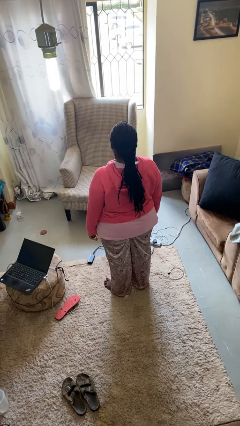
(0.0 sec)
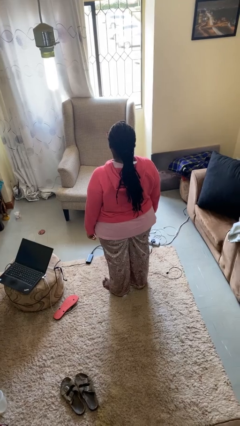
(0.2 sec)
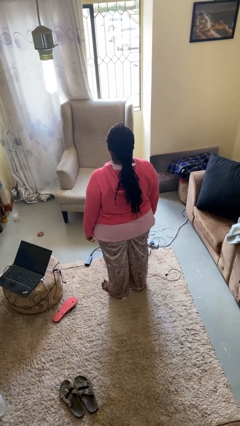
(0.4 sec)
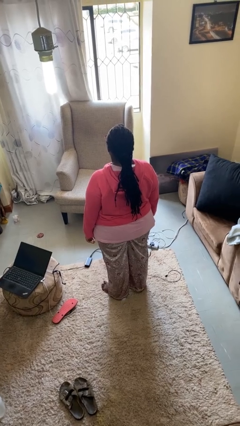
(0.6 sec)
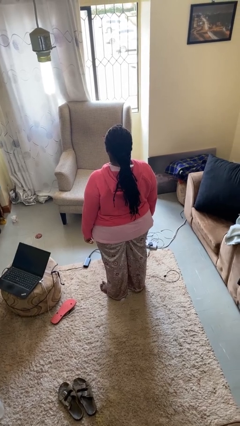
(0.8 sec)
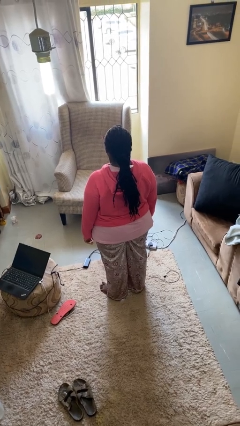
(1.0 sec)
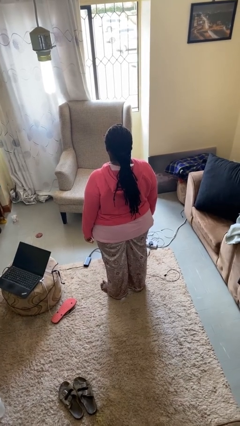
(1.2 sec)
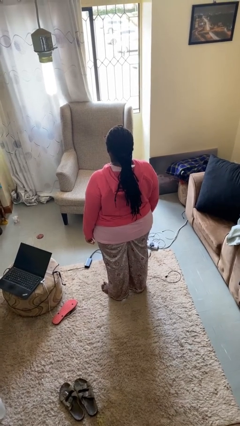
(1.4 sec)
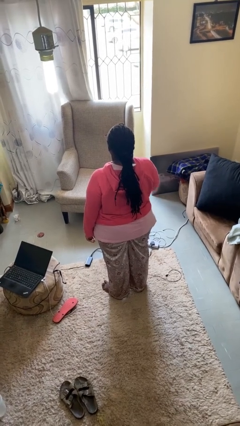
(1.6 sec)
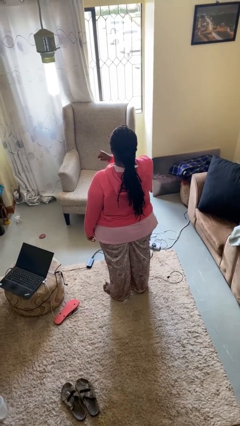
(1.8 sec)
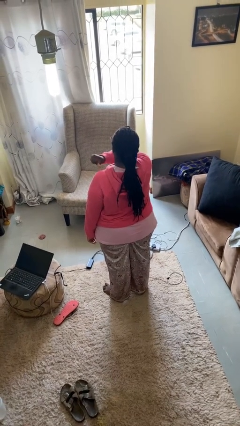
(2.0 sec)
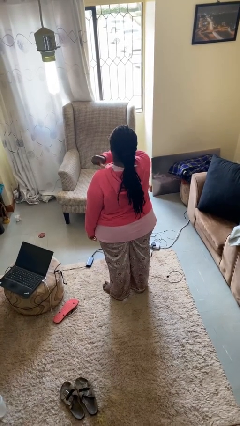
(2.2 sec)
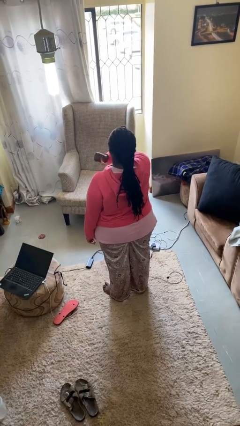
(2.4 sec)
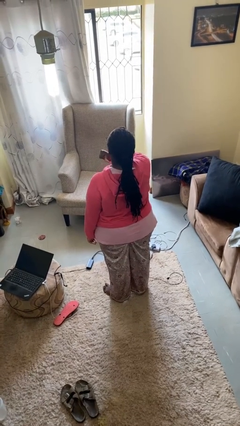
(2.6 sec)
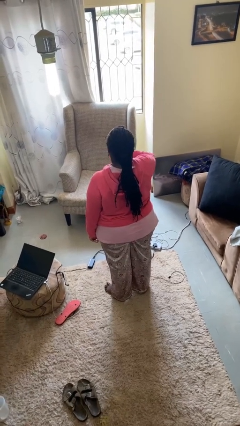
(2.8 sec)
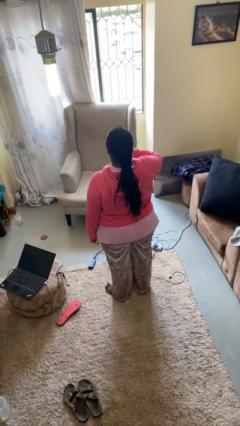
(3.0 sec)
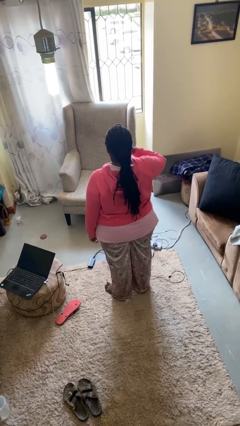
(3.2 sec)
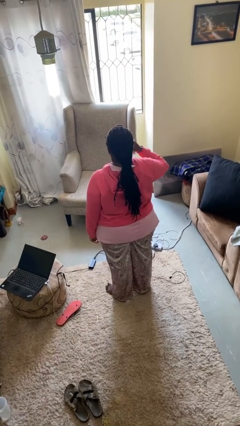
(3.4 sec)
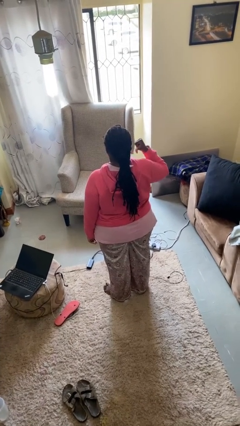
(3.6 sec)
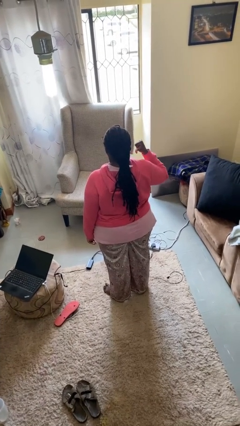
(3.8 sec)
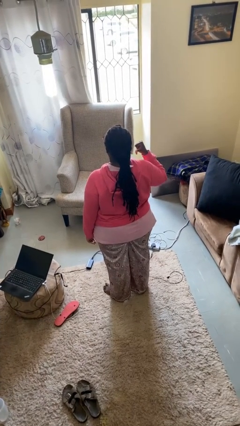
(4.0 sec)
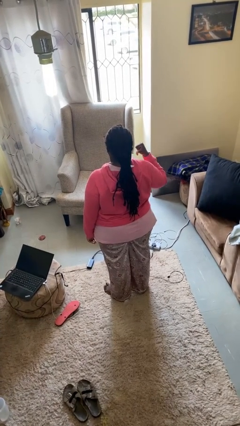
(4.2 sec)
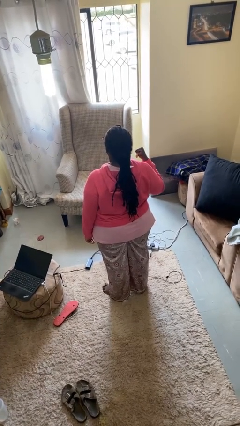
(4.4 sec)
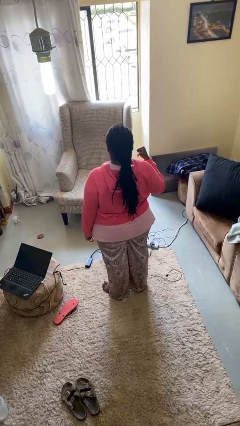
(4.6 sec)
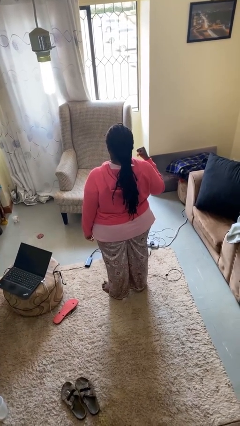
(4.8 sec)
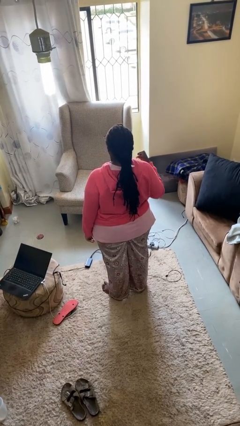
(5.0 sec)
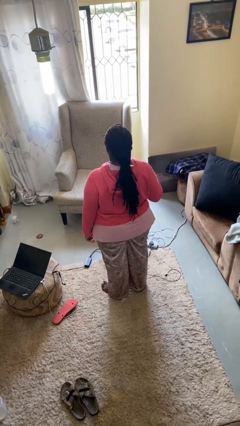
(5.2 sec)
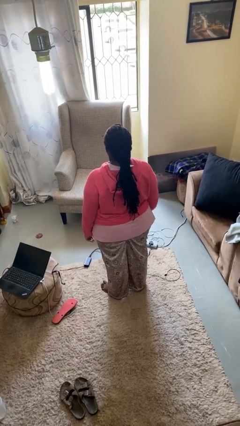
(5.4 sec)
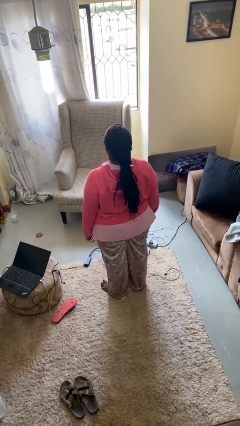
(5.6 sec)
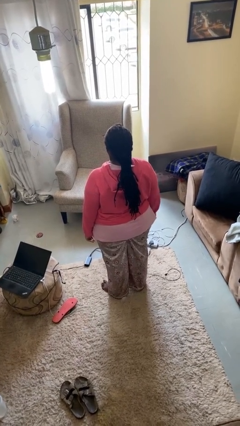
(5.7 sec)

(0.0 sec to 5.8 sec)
person gestures cut

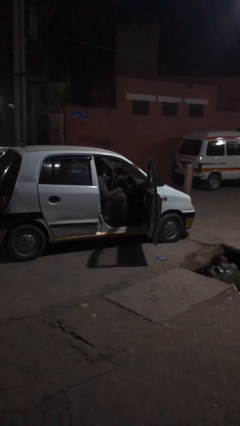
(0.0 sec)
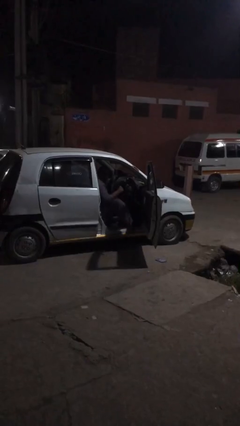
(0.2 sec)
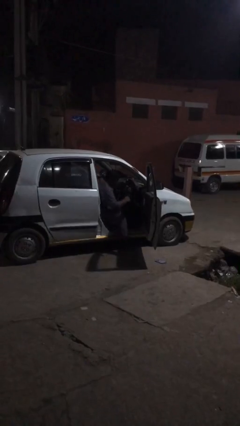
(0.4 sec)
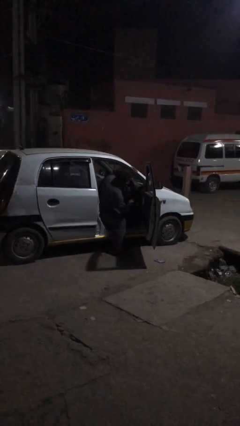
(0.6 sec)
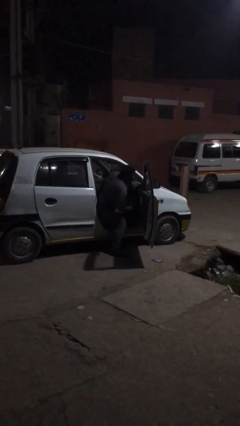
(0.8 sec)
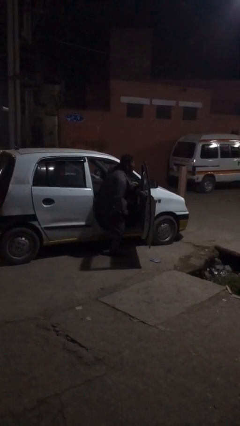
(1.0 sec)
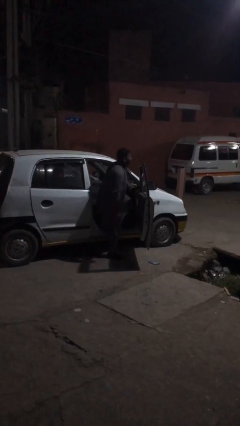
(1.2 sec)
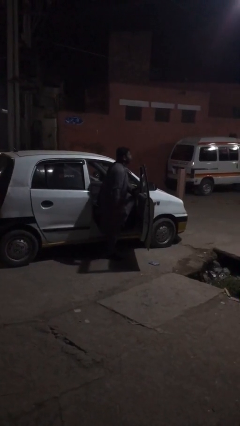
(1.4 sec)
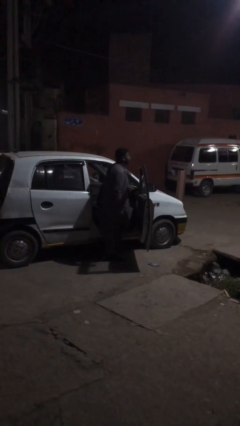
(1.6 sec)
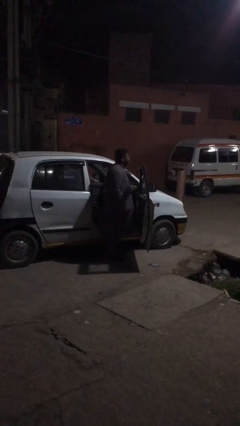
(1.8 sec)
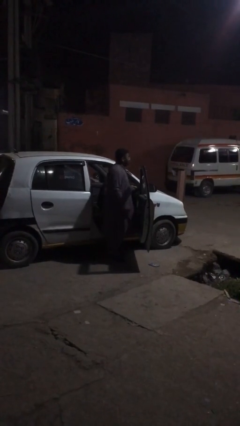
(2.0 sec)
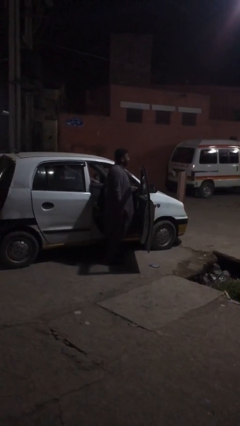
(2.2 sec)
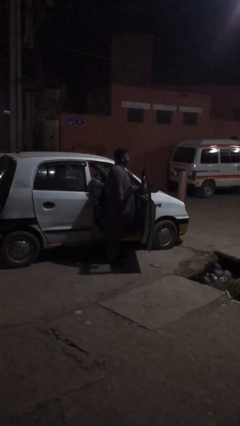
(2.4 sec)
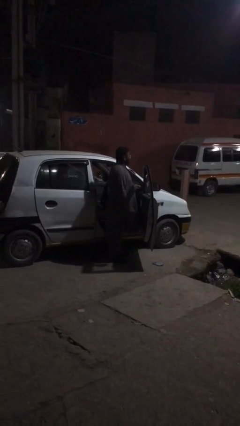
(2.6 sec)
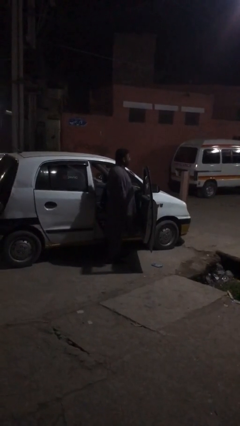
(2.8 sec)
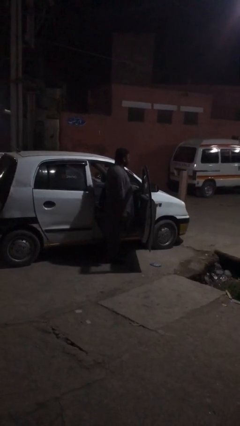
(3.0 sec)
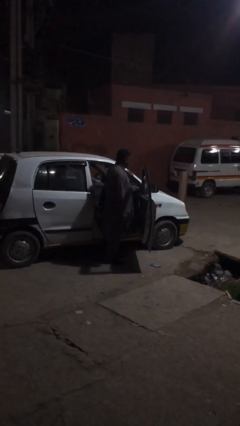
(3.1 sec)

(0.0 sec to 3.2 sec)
person exits car

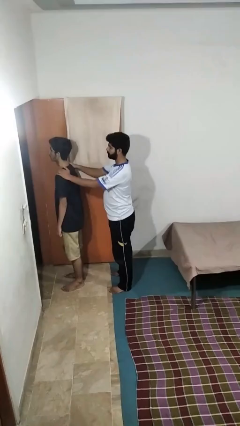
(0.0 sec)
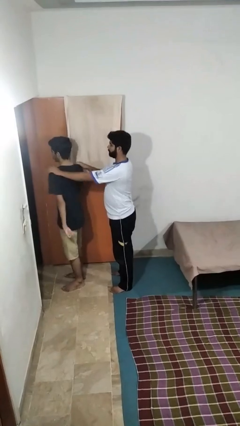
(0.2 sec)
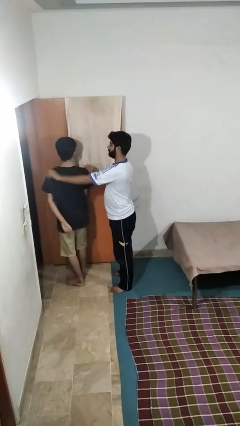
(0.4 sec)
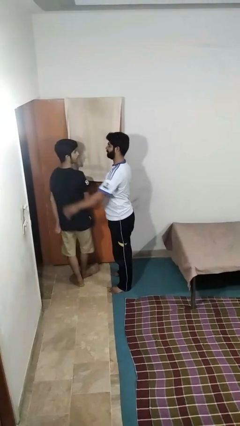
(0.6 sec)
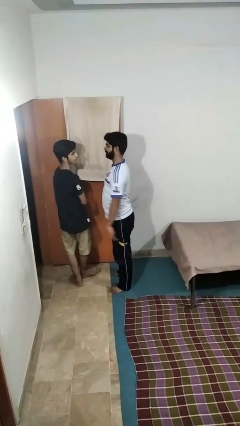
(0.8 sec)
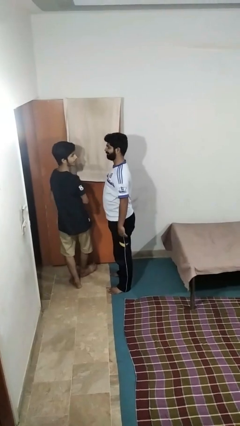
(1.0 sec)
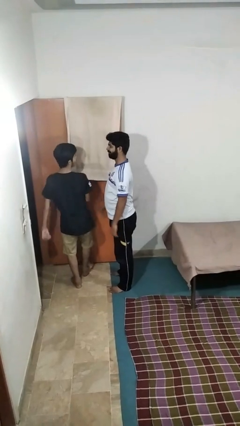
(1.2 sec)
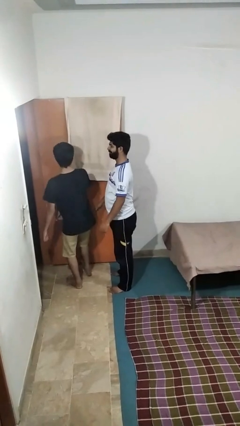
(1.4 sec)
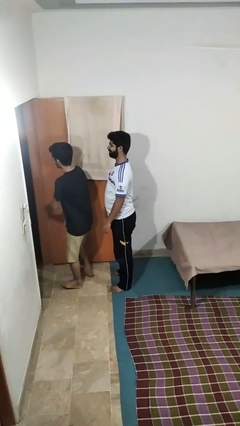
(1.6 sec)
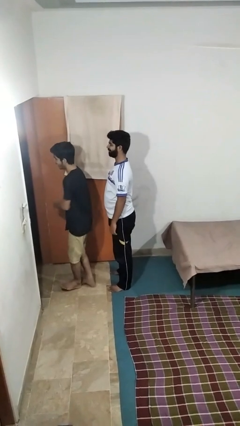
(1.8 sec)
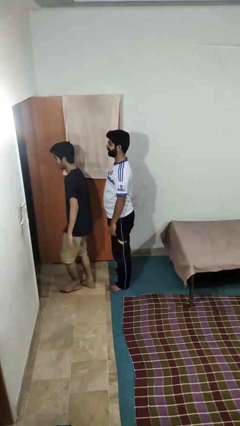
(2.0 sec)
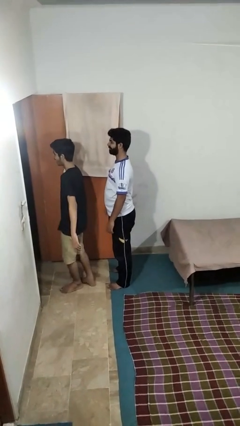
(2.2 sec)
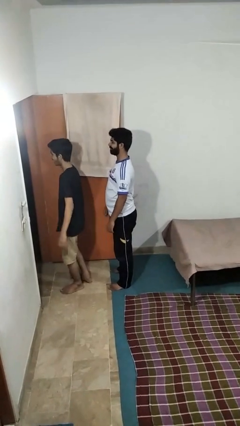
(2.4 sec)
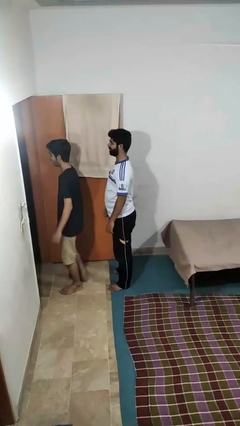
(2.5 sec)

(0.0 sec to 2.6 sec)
person spins person around

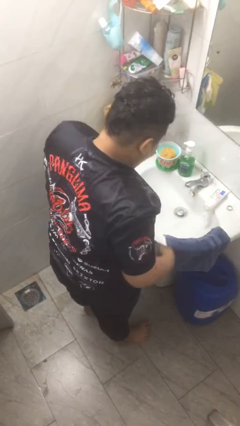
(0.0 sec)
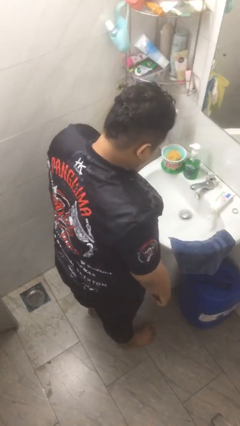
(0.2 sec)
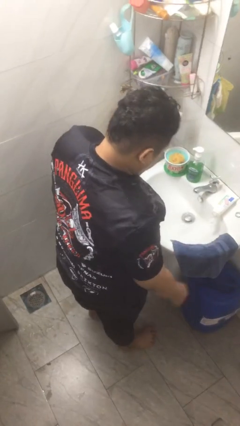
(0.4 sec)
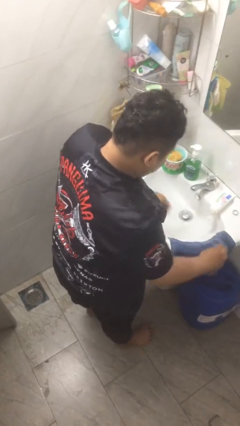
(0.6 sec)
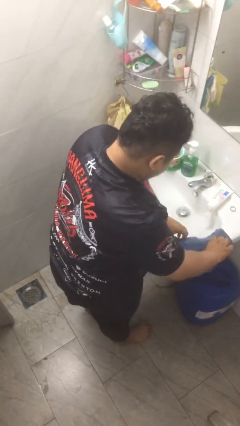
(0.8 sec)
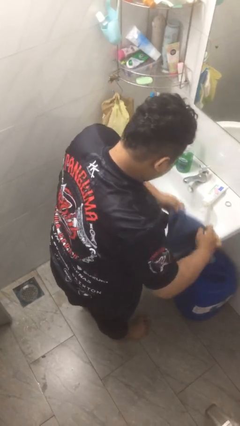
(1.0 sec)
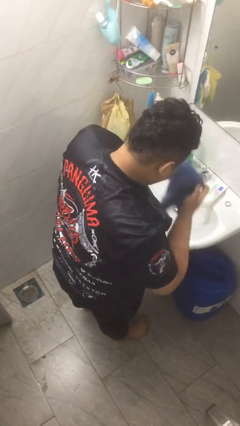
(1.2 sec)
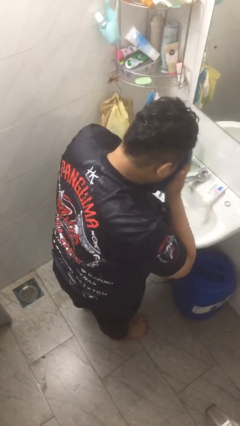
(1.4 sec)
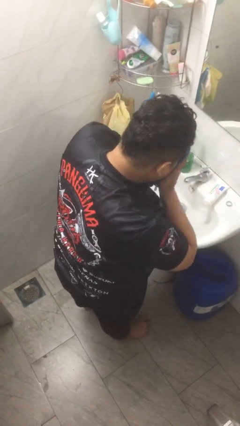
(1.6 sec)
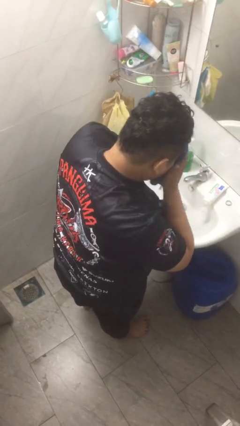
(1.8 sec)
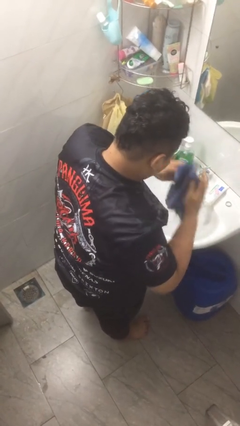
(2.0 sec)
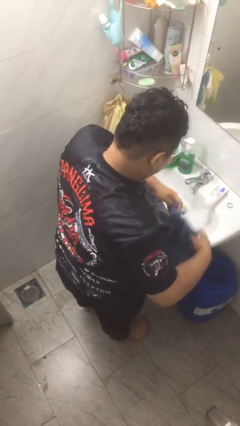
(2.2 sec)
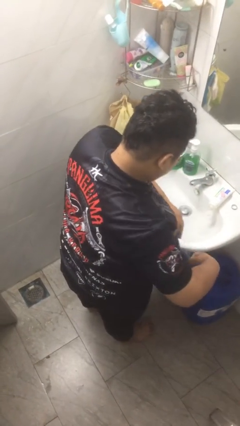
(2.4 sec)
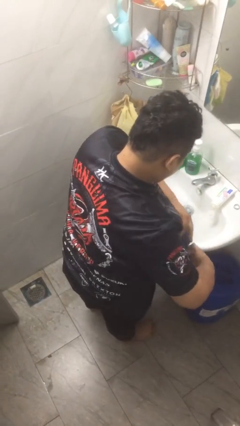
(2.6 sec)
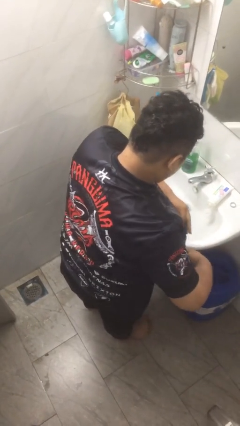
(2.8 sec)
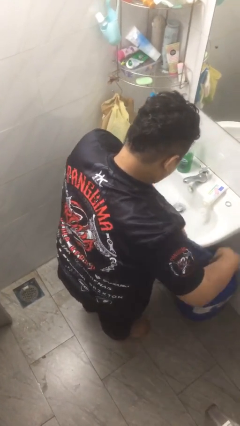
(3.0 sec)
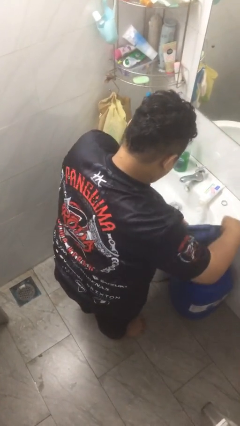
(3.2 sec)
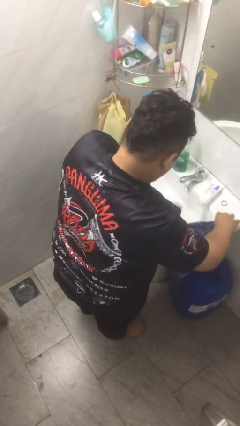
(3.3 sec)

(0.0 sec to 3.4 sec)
person dries face with towel

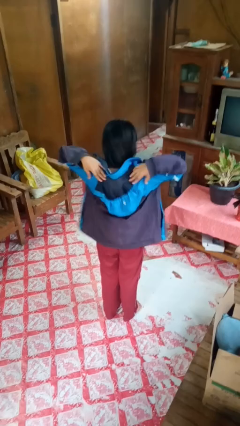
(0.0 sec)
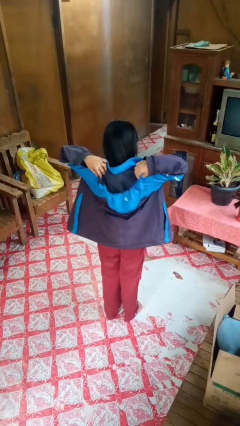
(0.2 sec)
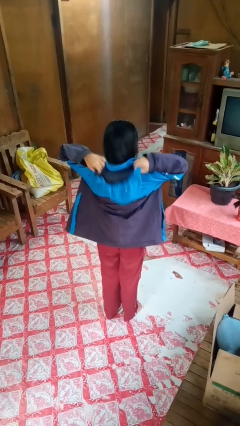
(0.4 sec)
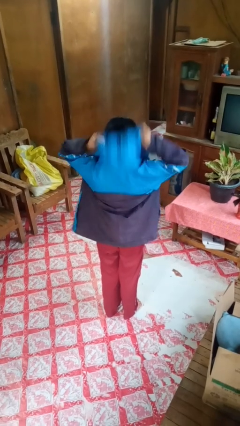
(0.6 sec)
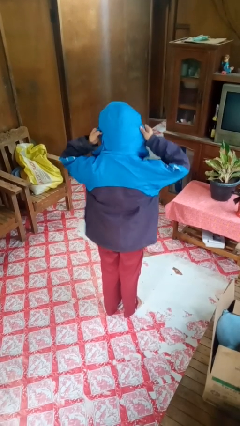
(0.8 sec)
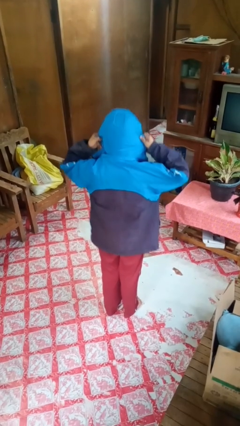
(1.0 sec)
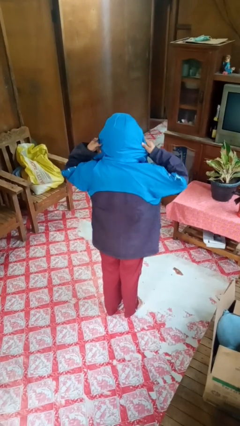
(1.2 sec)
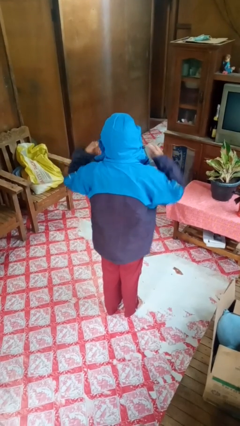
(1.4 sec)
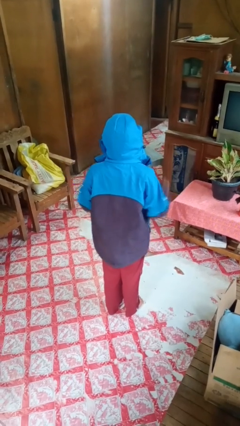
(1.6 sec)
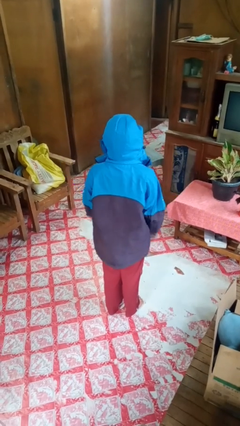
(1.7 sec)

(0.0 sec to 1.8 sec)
person puts on hoodie

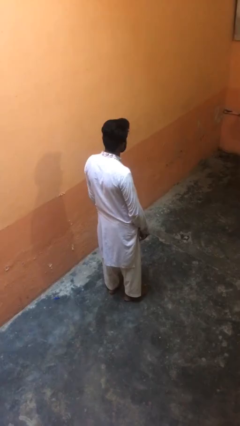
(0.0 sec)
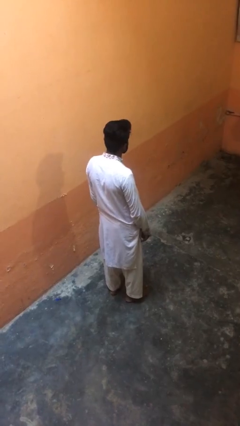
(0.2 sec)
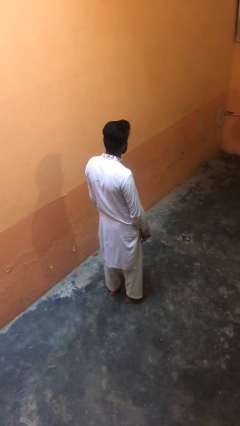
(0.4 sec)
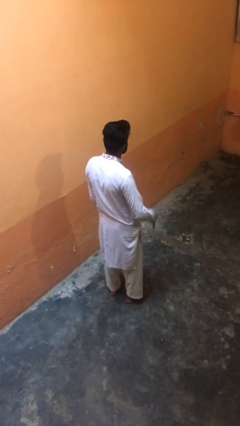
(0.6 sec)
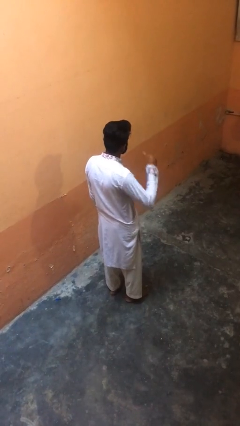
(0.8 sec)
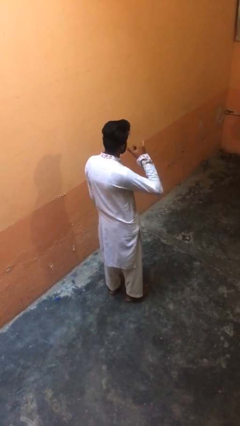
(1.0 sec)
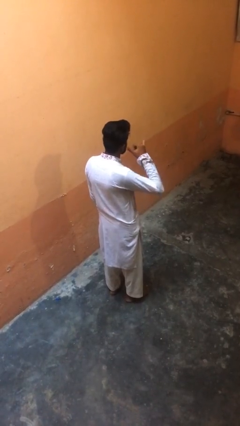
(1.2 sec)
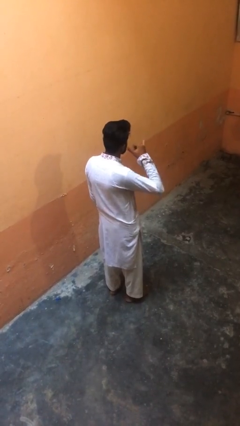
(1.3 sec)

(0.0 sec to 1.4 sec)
person gestures call me
